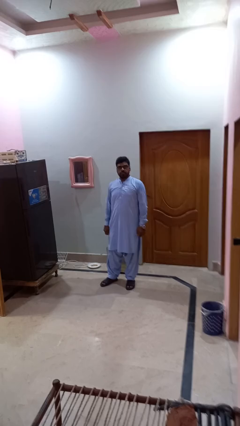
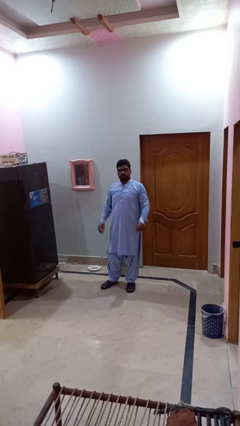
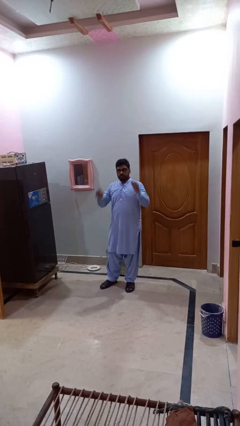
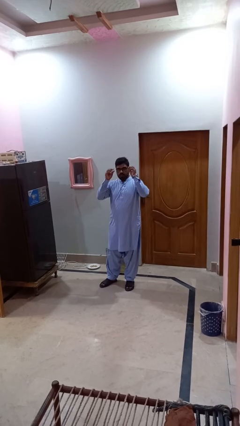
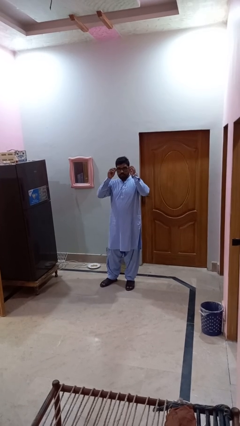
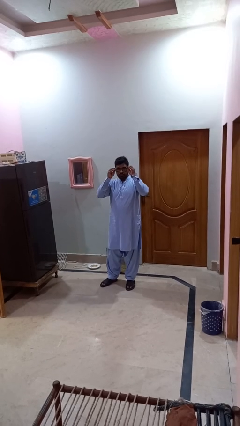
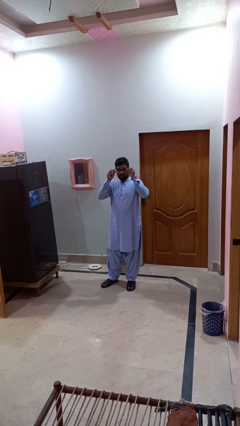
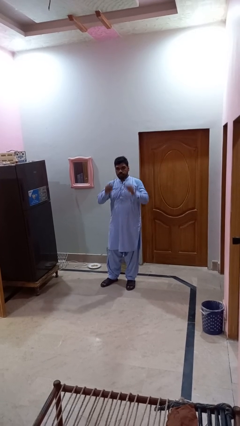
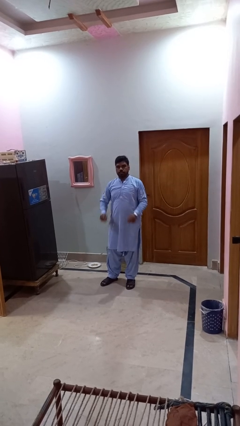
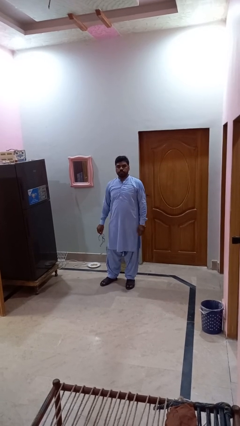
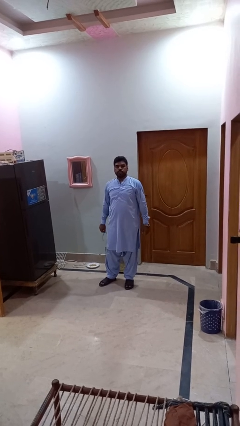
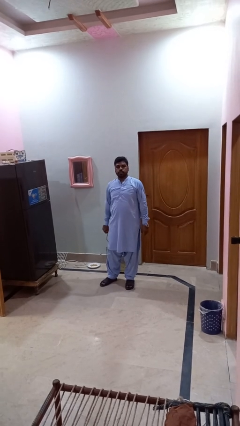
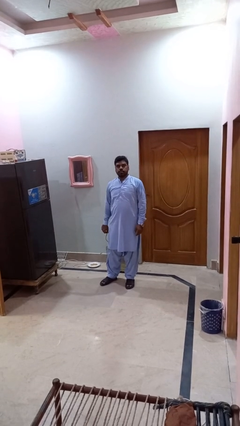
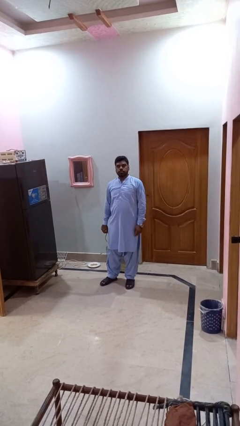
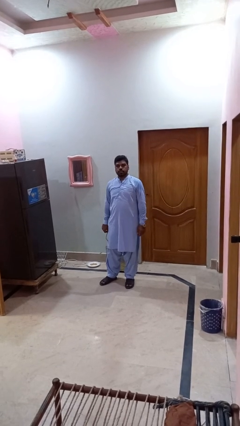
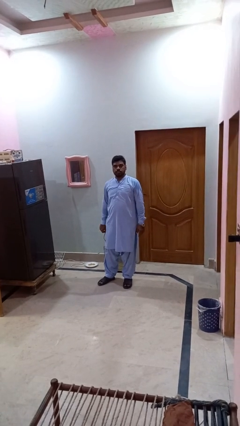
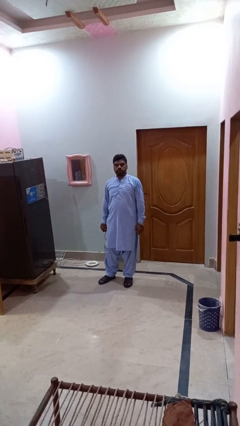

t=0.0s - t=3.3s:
person takes off glasses

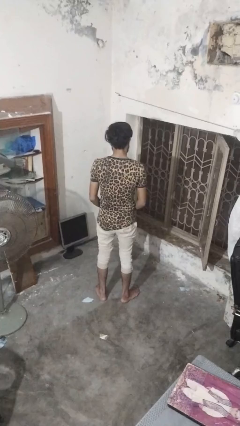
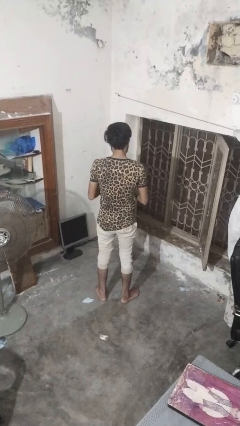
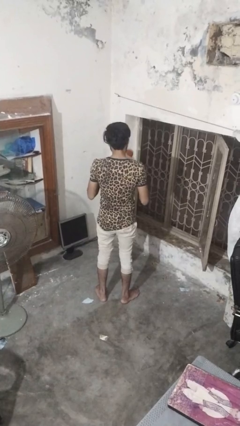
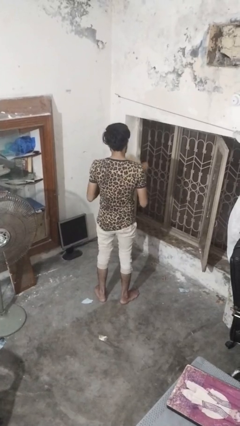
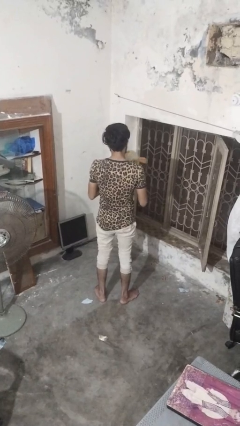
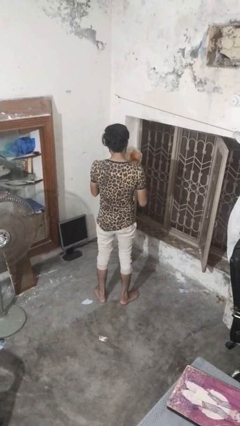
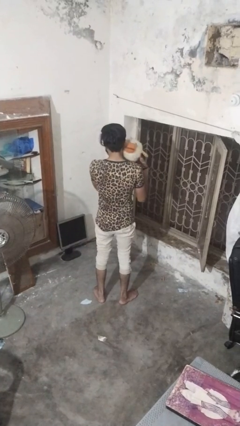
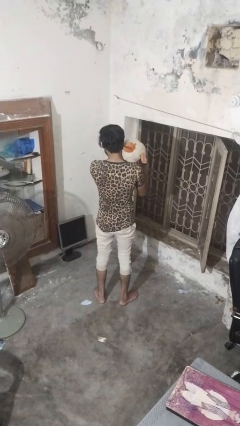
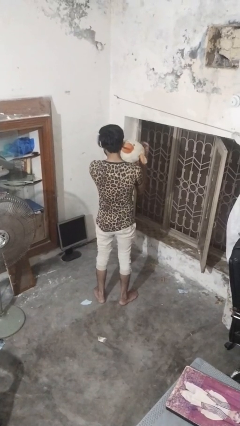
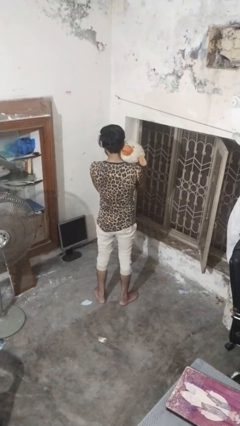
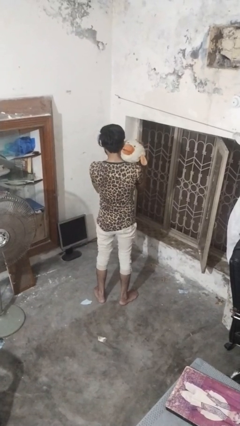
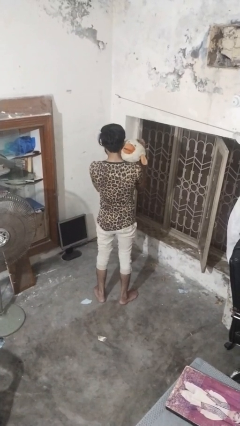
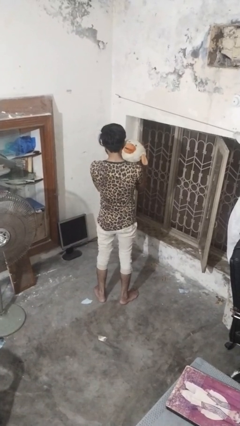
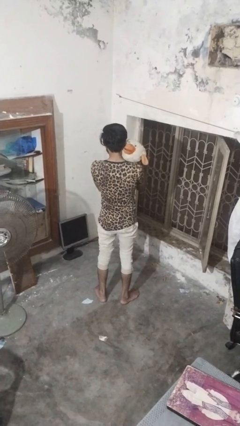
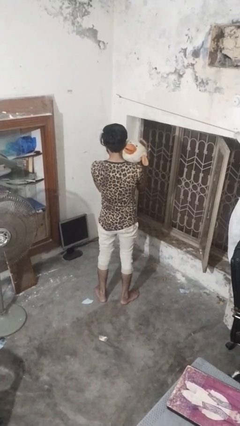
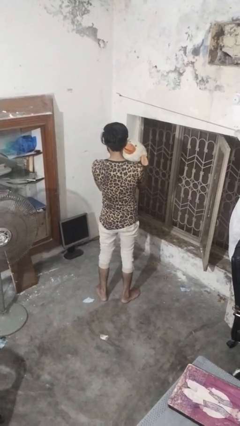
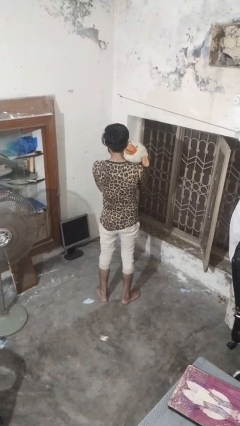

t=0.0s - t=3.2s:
person hugs stuffed animal

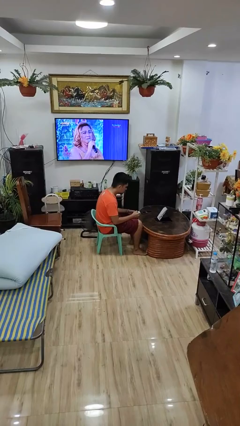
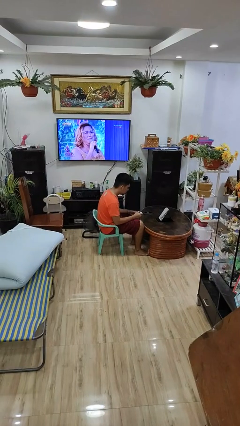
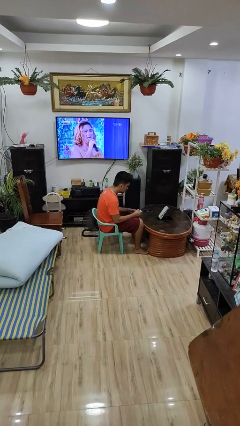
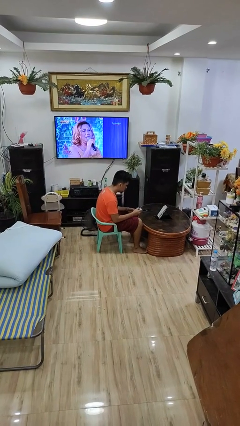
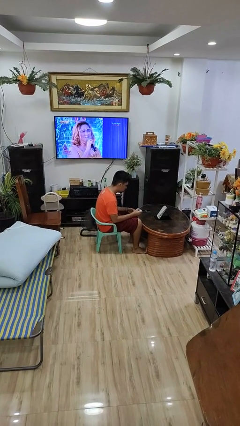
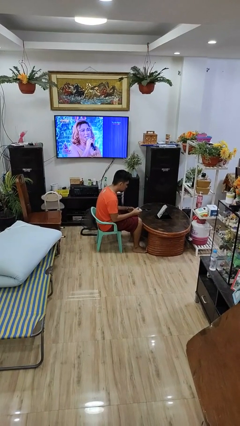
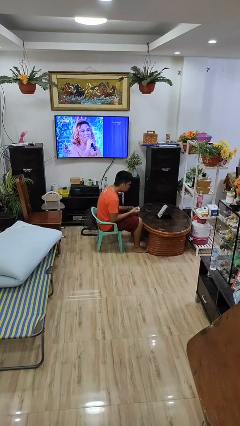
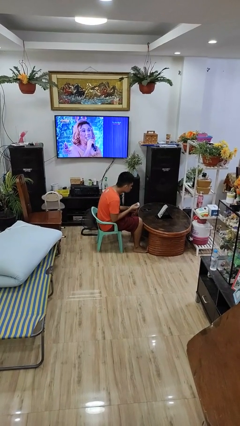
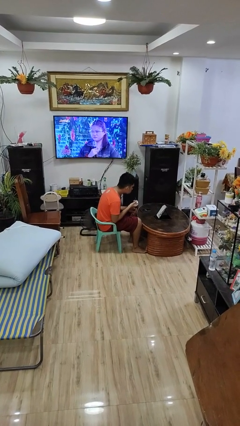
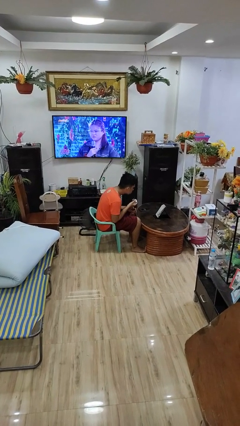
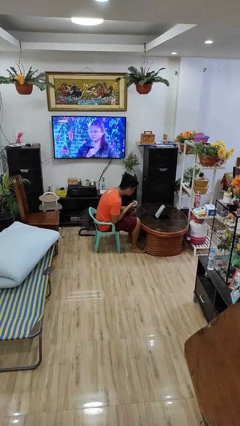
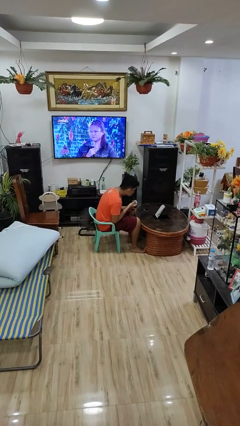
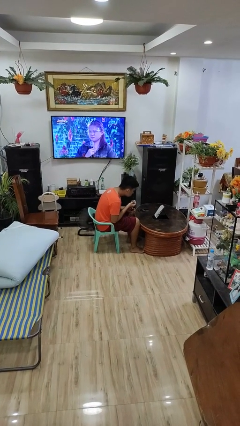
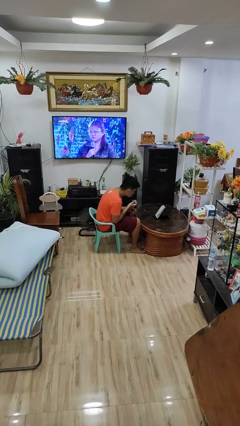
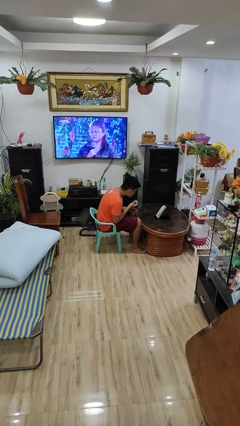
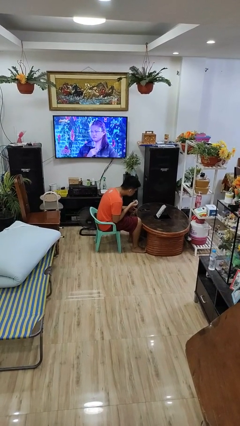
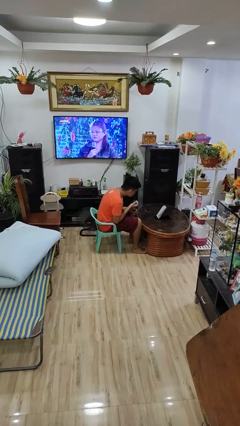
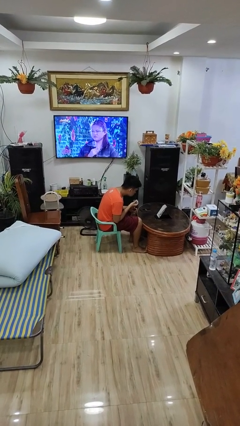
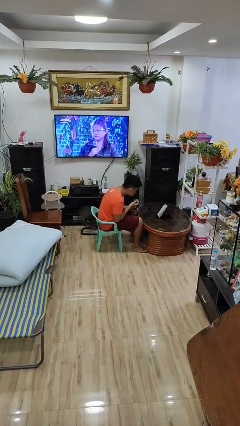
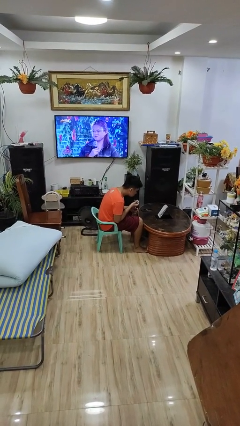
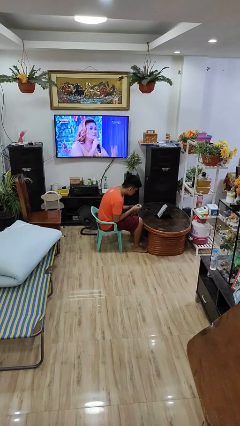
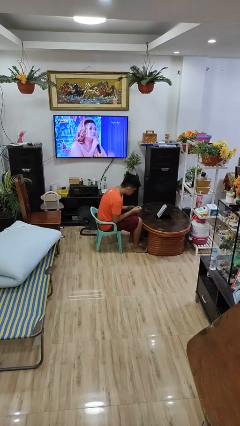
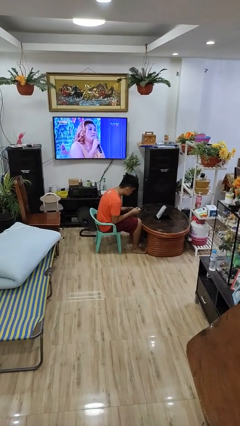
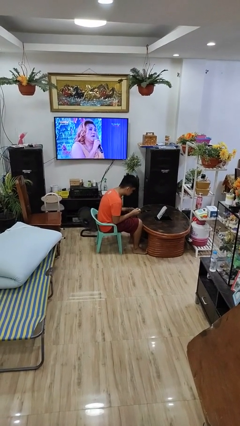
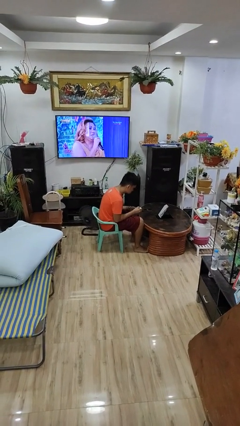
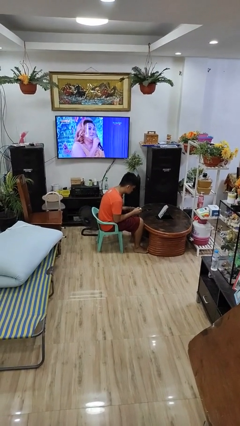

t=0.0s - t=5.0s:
person applies lip makeup

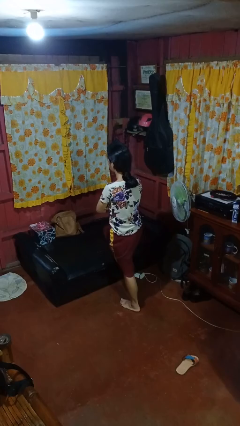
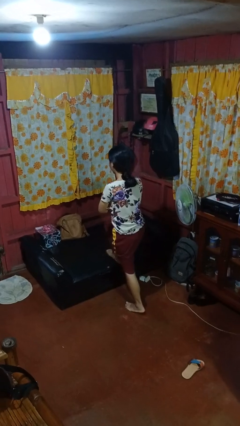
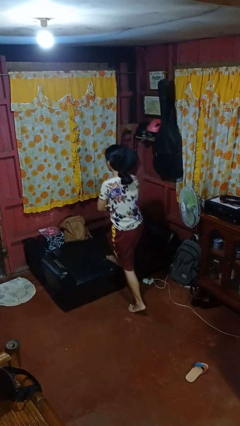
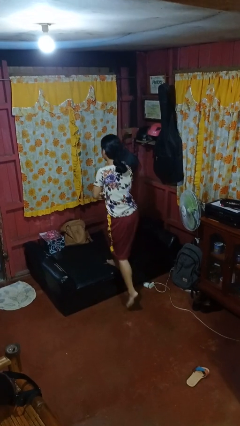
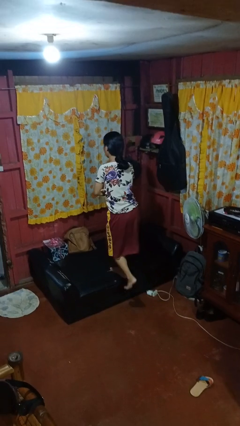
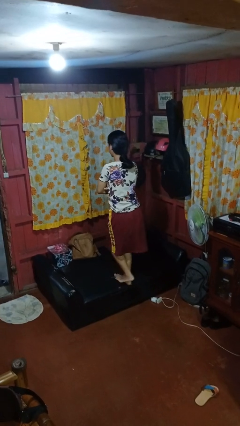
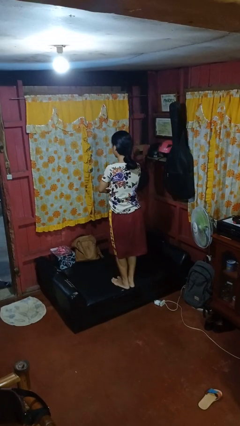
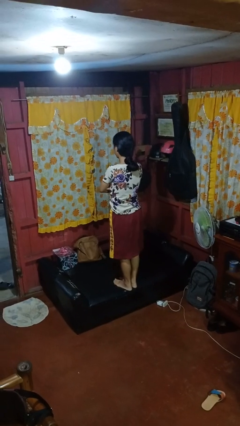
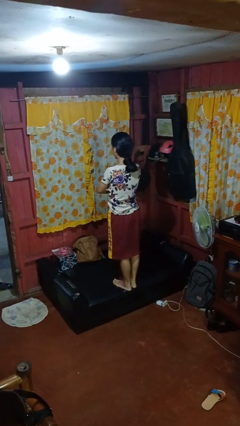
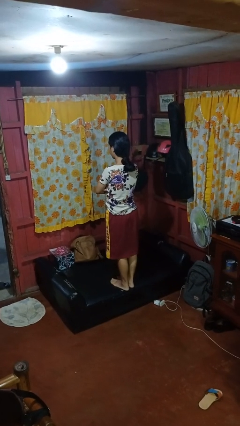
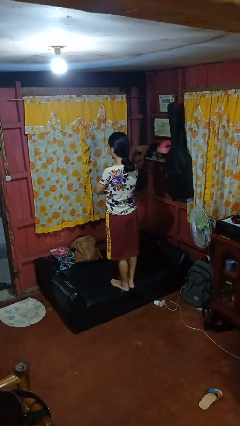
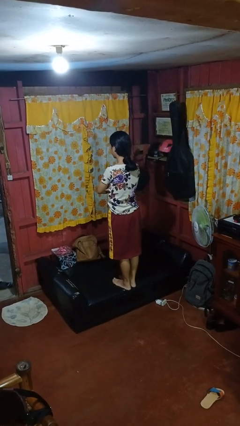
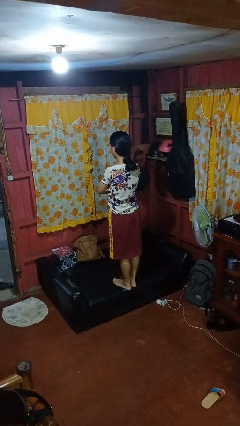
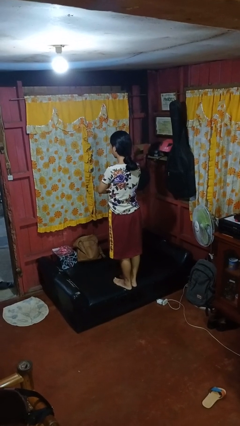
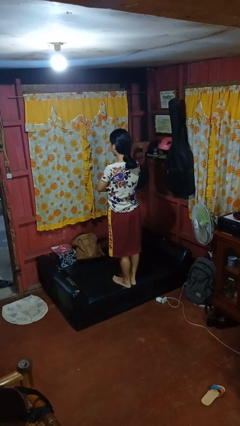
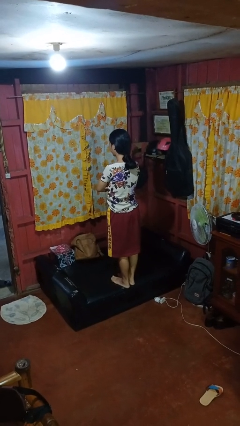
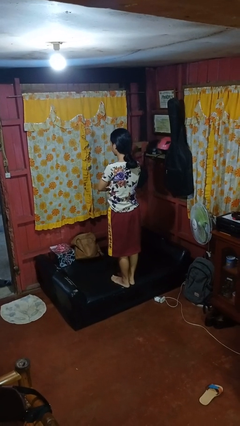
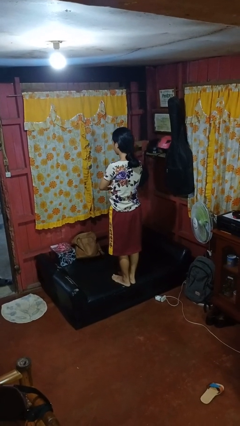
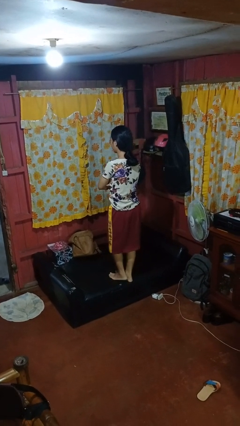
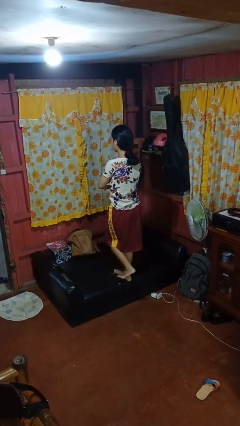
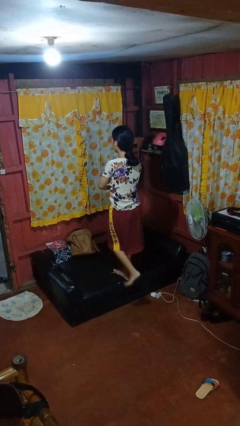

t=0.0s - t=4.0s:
person climbs on couch

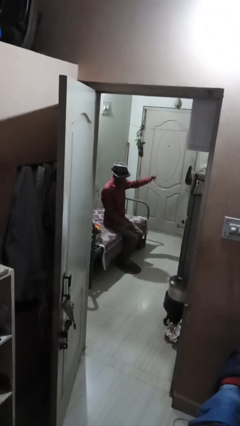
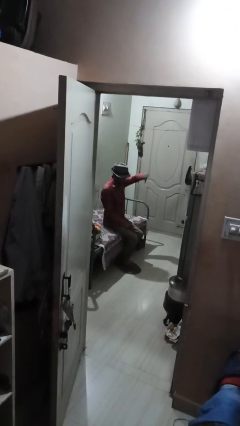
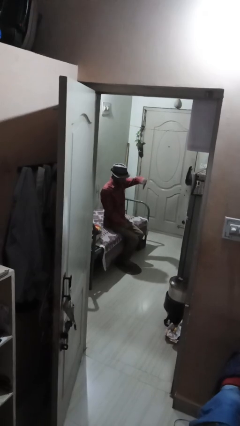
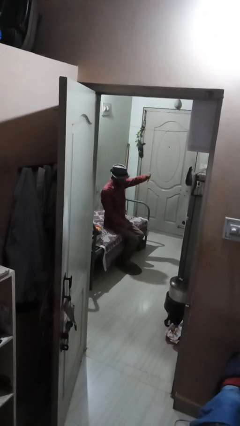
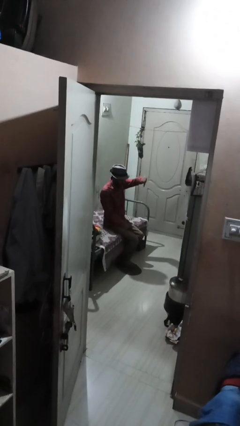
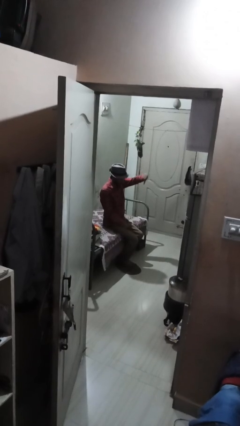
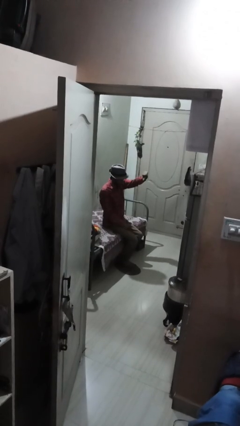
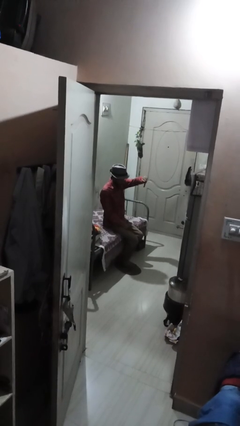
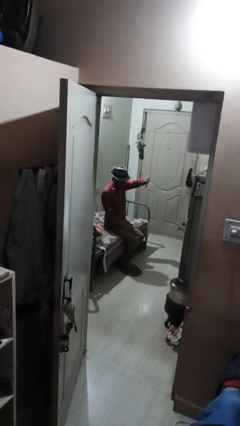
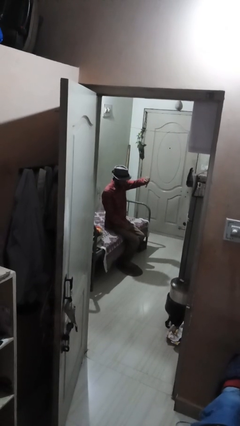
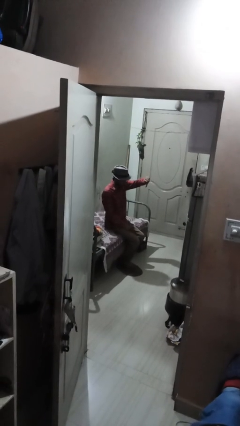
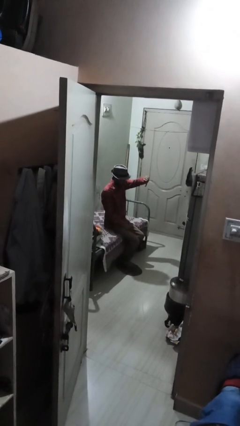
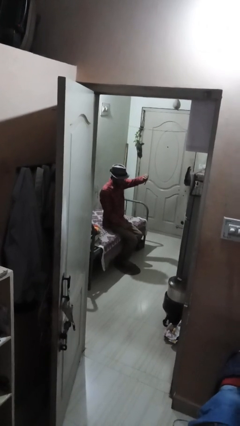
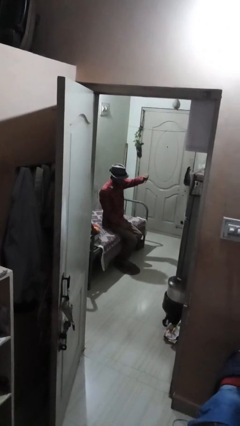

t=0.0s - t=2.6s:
person gestures thumbs down
